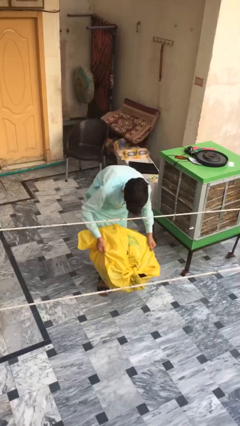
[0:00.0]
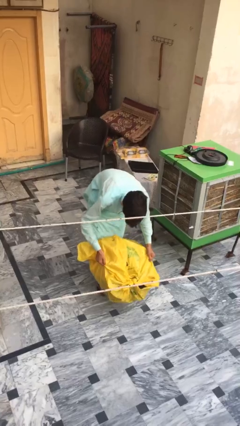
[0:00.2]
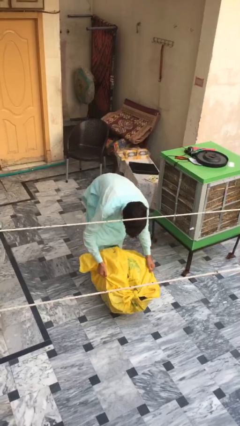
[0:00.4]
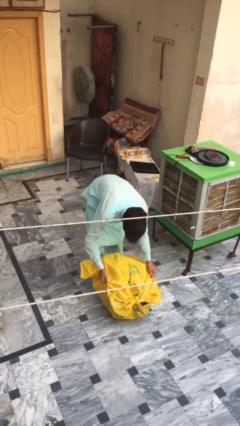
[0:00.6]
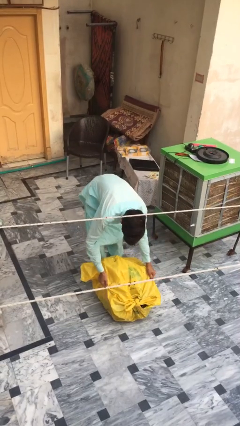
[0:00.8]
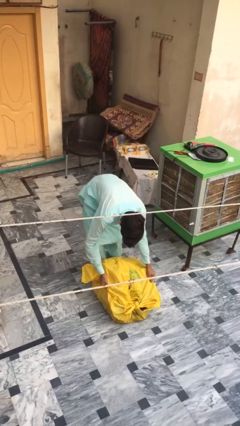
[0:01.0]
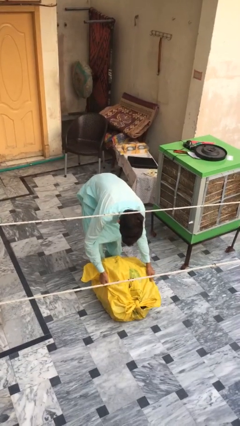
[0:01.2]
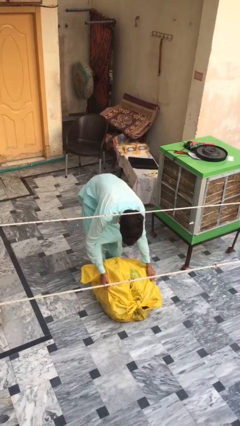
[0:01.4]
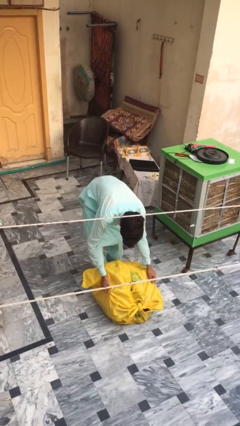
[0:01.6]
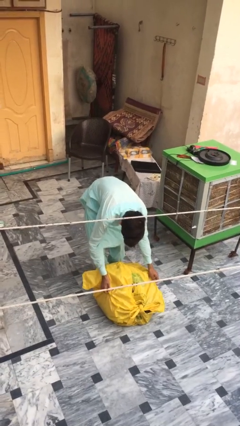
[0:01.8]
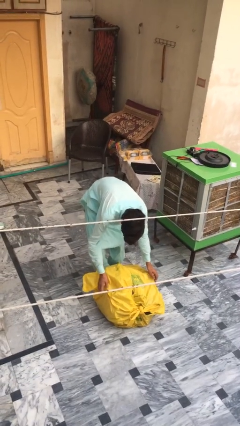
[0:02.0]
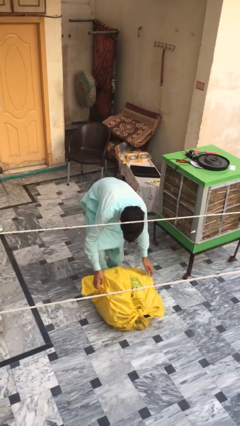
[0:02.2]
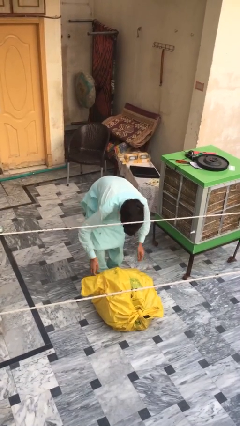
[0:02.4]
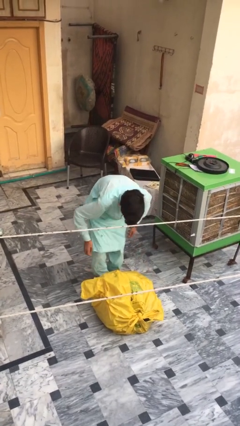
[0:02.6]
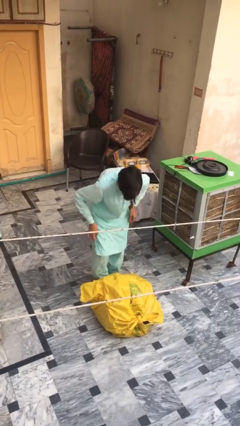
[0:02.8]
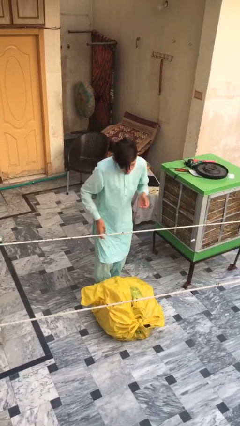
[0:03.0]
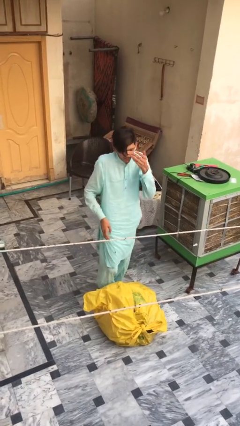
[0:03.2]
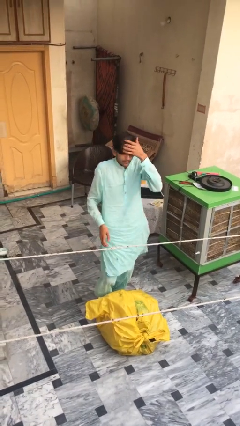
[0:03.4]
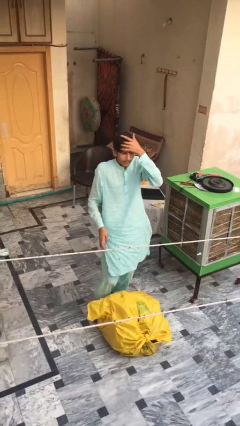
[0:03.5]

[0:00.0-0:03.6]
person puts down object on floor

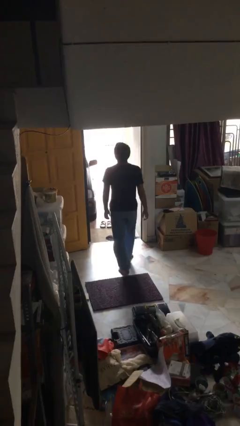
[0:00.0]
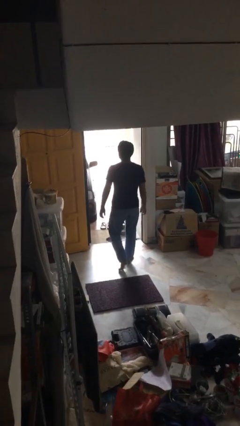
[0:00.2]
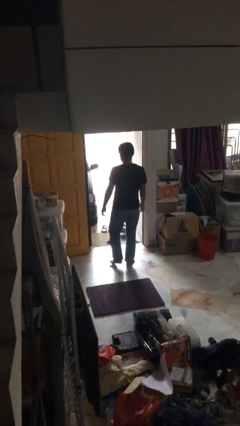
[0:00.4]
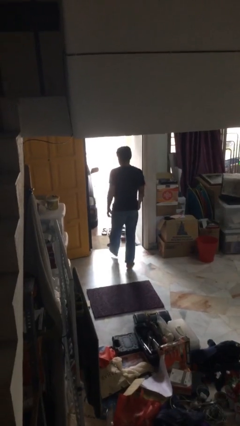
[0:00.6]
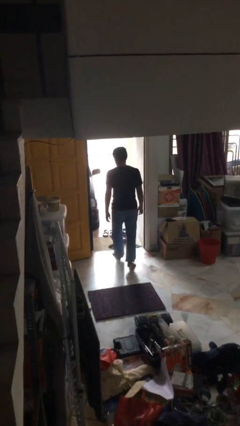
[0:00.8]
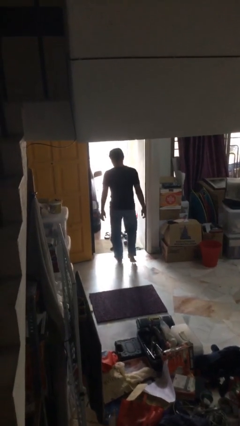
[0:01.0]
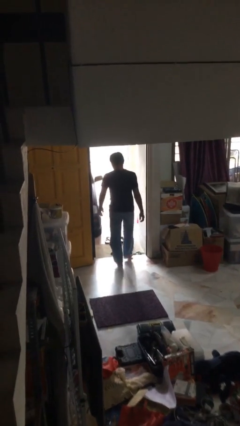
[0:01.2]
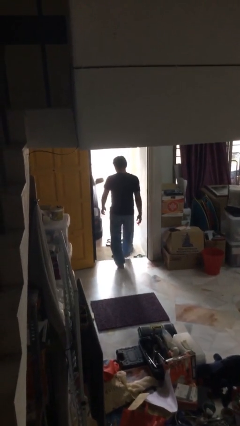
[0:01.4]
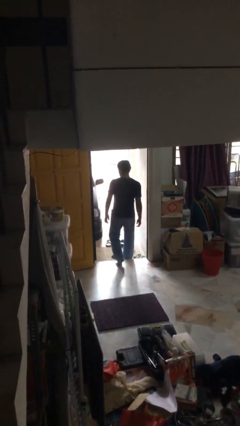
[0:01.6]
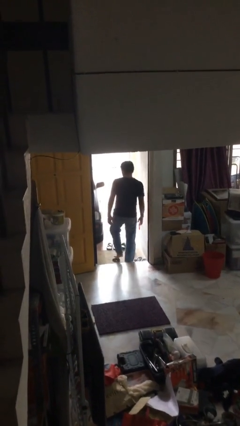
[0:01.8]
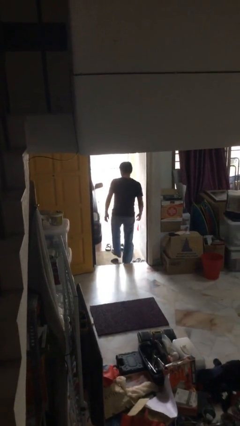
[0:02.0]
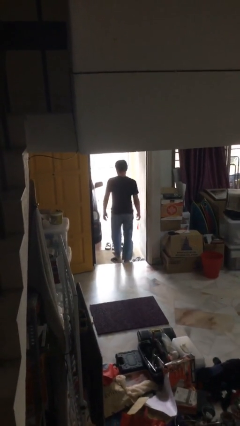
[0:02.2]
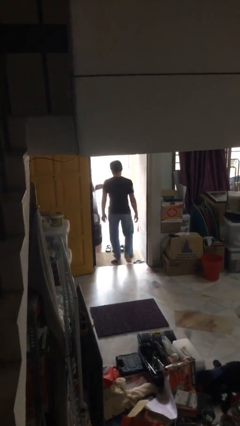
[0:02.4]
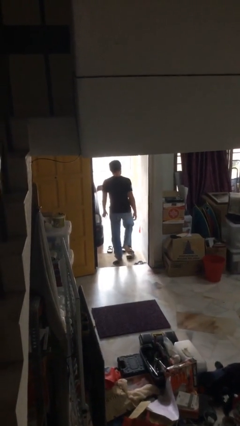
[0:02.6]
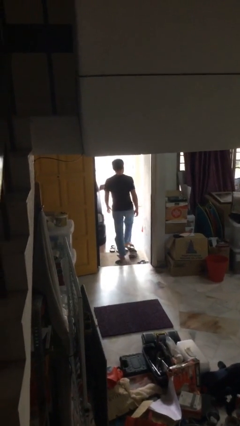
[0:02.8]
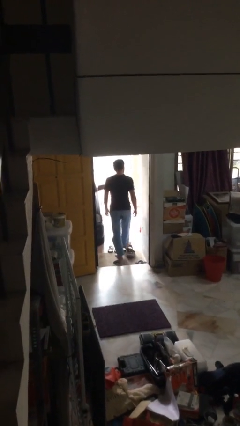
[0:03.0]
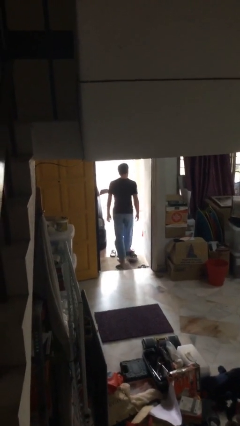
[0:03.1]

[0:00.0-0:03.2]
person exits scene through structure

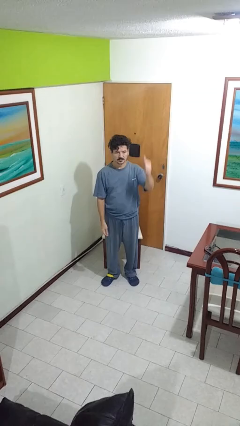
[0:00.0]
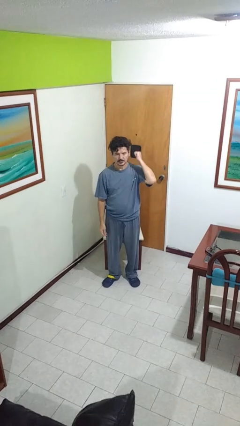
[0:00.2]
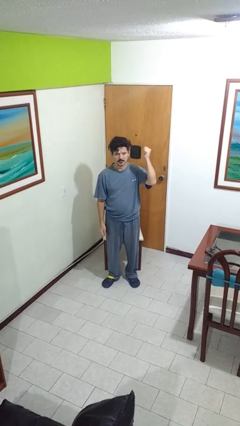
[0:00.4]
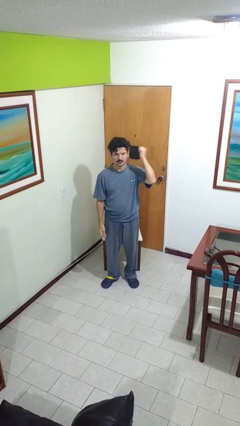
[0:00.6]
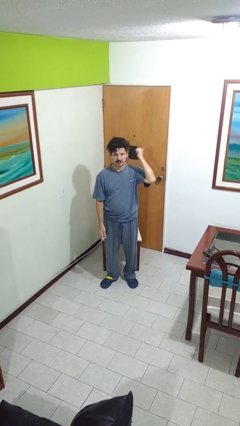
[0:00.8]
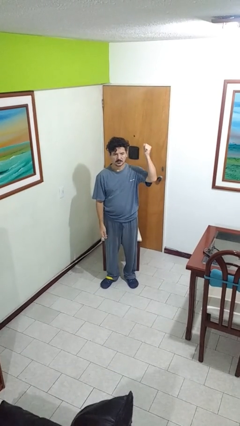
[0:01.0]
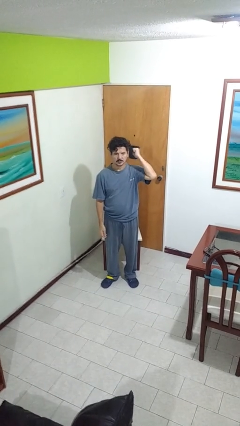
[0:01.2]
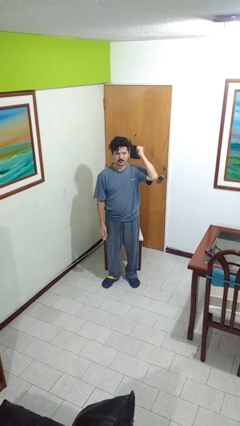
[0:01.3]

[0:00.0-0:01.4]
person gestures behind me

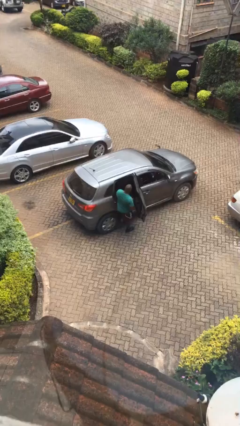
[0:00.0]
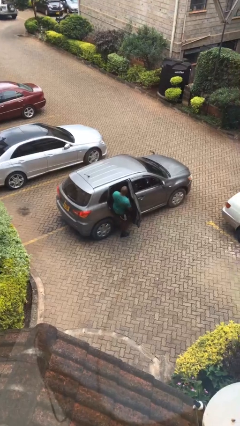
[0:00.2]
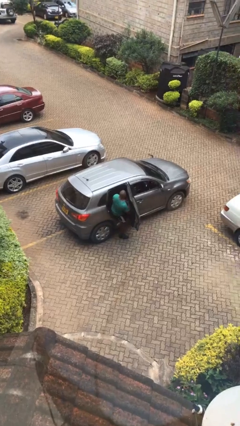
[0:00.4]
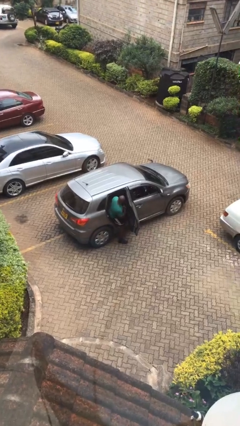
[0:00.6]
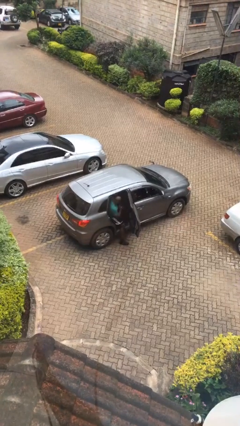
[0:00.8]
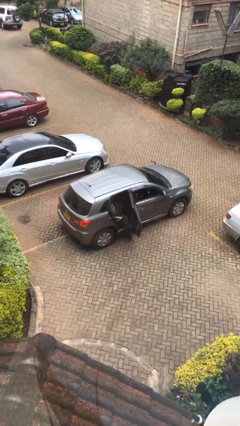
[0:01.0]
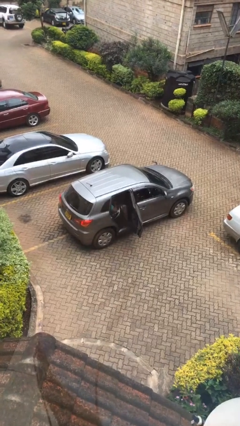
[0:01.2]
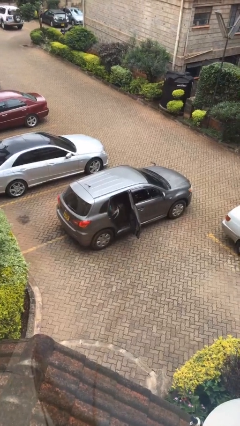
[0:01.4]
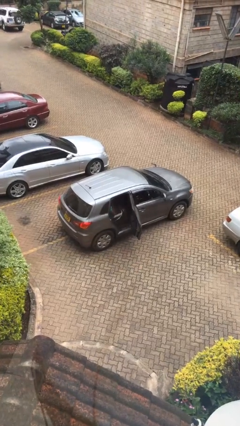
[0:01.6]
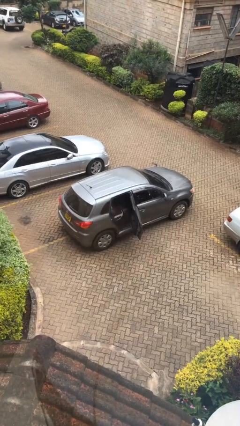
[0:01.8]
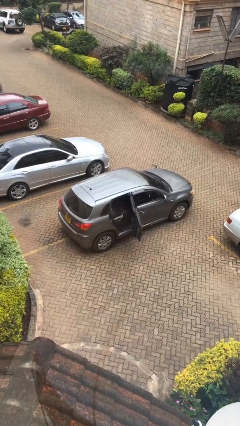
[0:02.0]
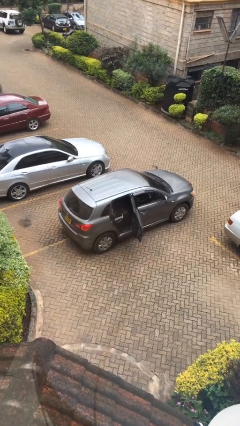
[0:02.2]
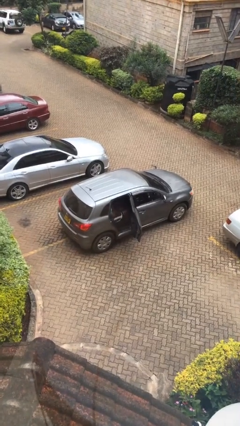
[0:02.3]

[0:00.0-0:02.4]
person enters car

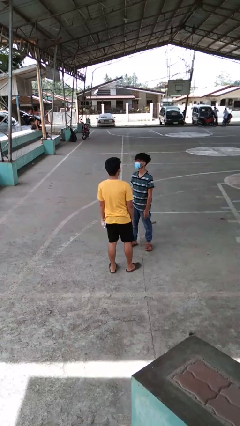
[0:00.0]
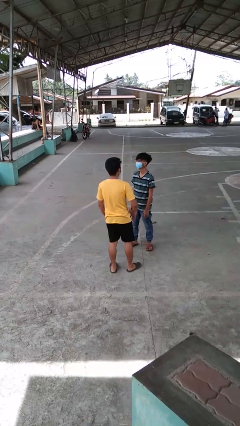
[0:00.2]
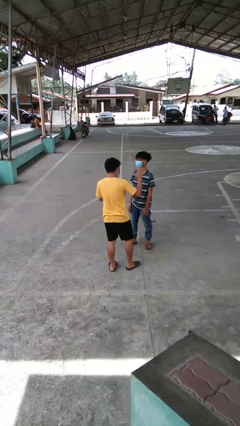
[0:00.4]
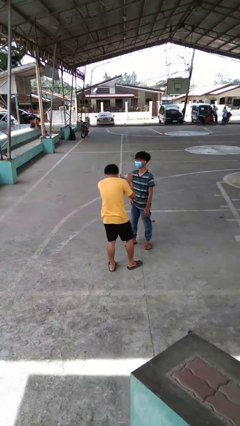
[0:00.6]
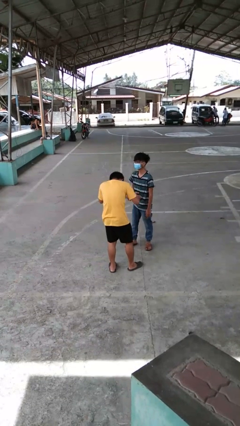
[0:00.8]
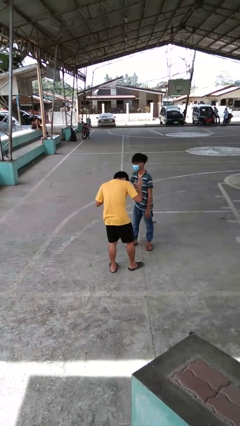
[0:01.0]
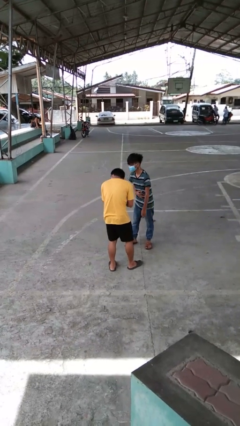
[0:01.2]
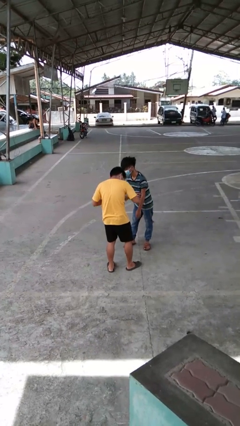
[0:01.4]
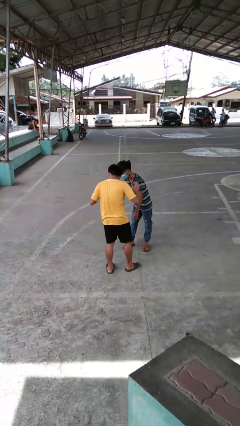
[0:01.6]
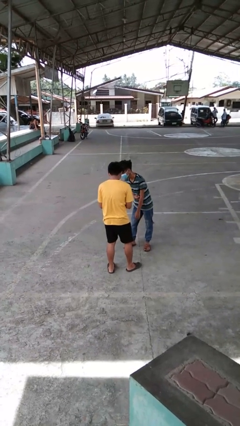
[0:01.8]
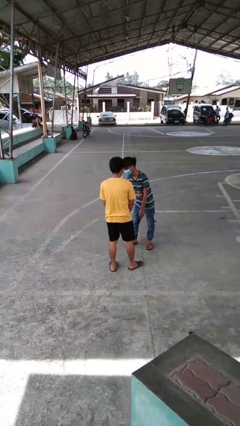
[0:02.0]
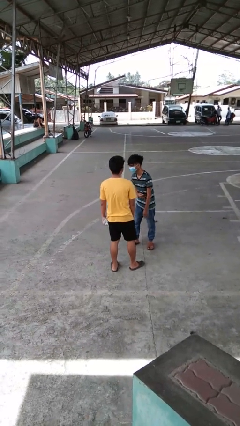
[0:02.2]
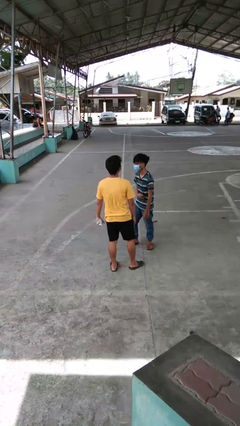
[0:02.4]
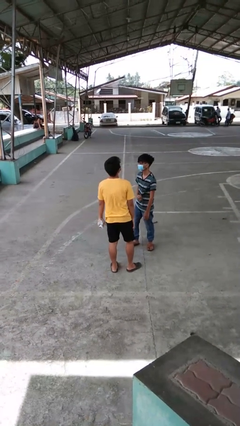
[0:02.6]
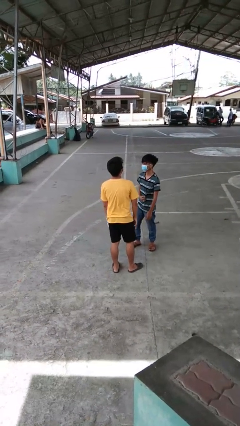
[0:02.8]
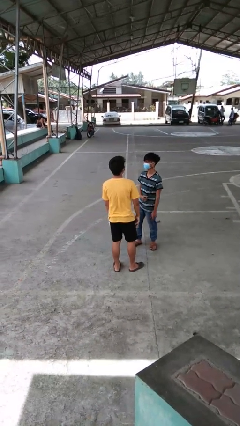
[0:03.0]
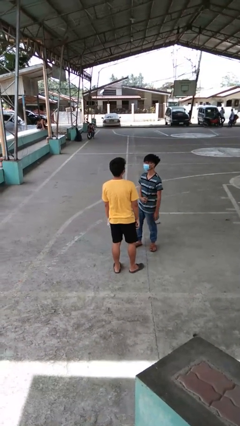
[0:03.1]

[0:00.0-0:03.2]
person laughs with person

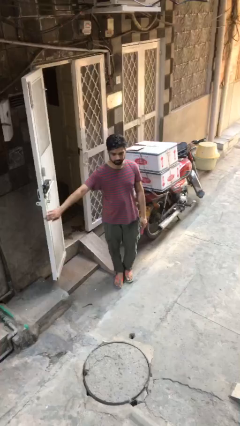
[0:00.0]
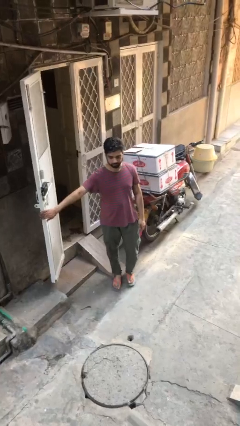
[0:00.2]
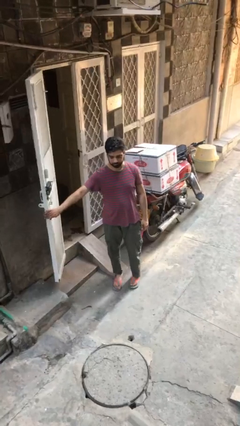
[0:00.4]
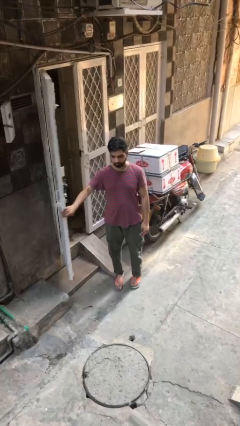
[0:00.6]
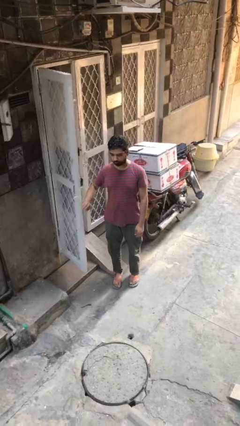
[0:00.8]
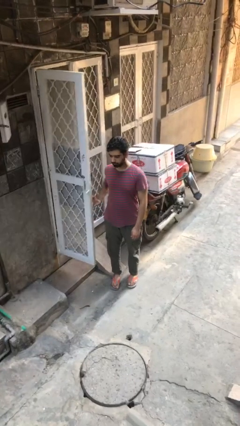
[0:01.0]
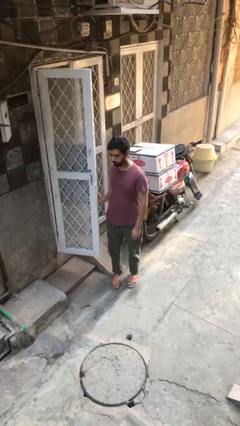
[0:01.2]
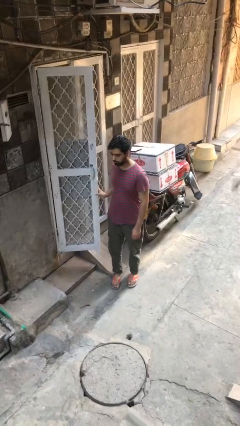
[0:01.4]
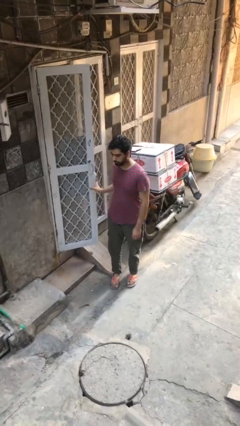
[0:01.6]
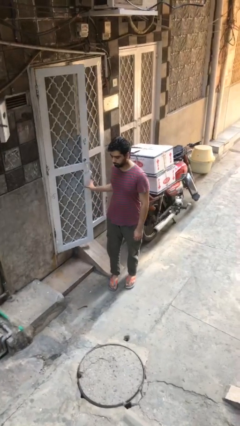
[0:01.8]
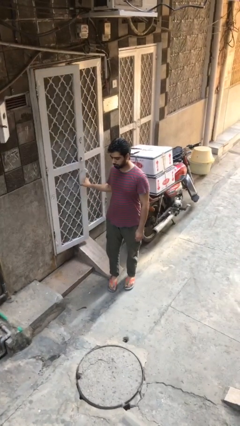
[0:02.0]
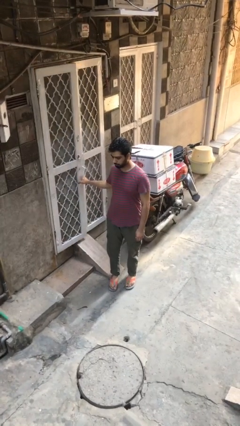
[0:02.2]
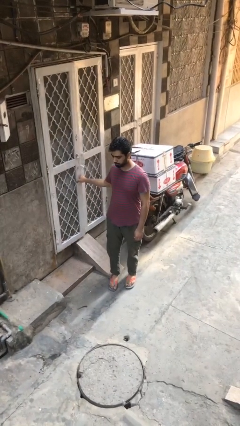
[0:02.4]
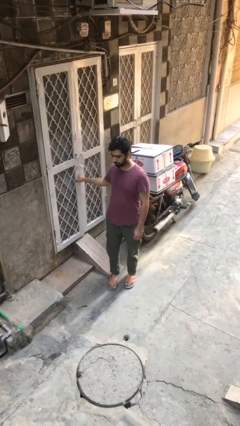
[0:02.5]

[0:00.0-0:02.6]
person closes facility door

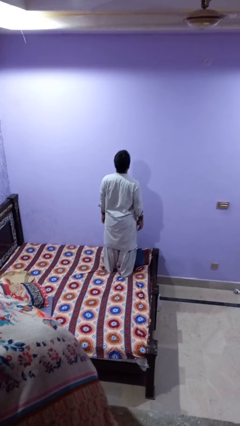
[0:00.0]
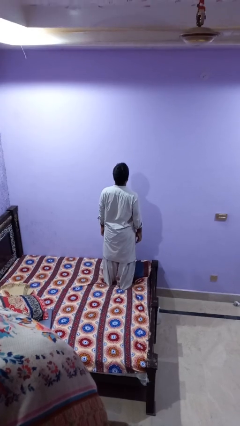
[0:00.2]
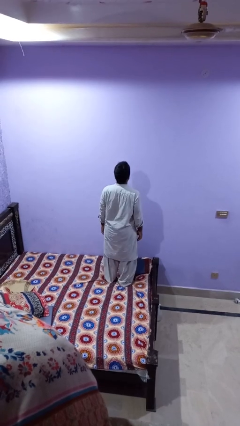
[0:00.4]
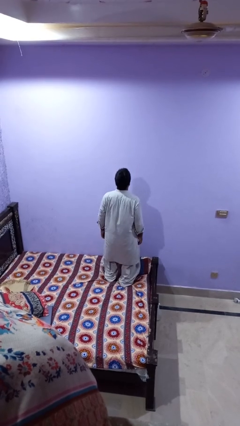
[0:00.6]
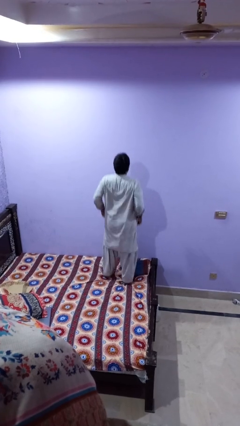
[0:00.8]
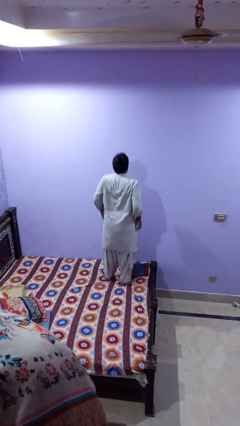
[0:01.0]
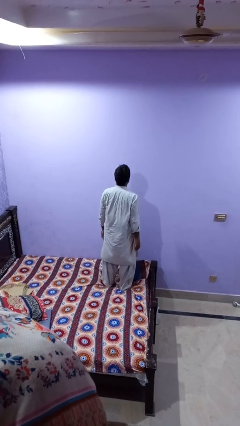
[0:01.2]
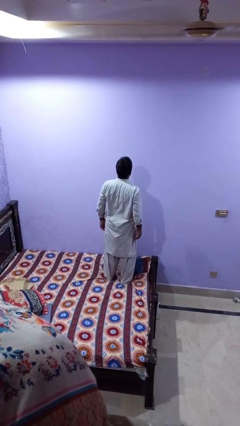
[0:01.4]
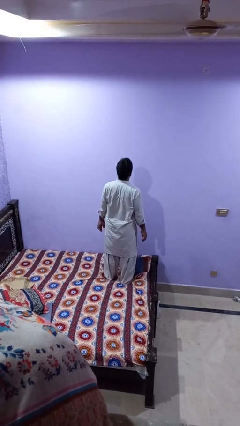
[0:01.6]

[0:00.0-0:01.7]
person jumps on bed
